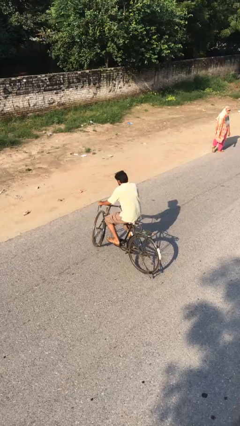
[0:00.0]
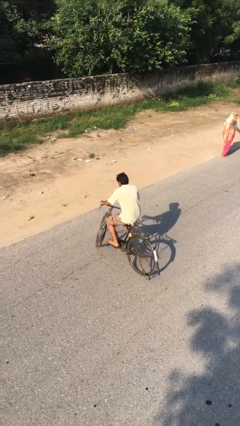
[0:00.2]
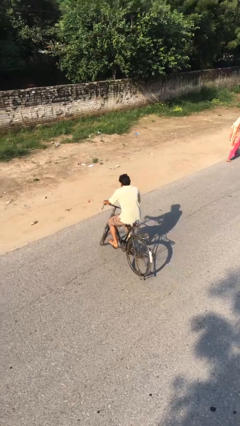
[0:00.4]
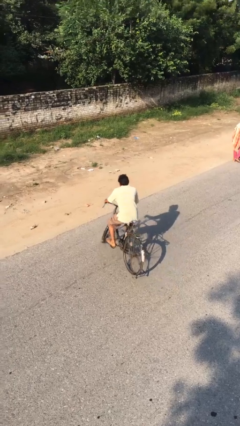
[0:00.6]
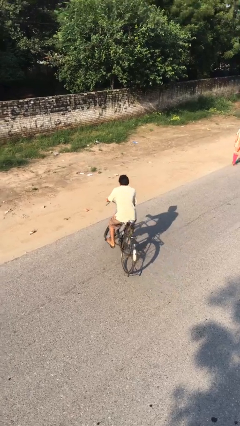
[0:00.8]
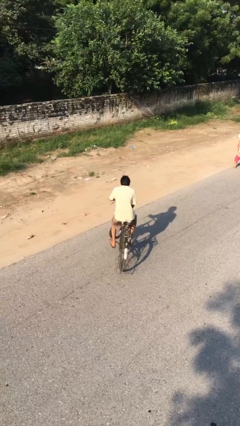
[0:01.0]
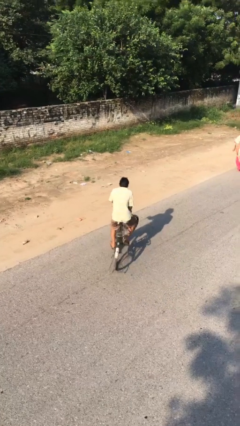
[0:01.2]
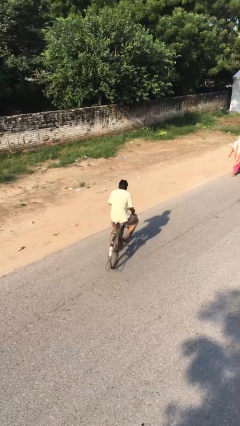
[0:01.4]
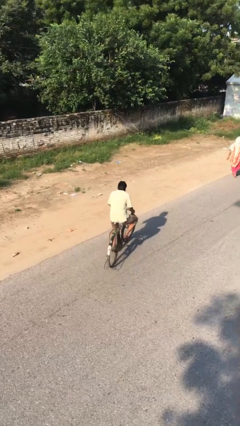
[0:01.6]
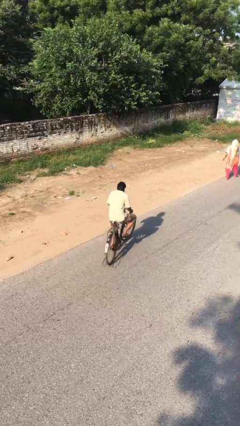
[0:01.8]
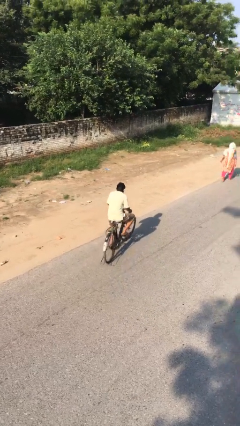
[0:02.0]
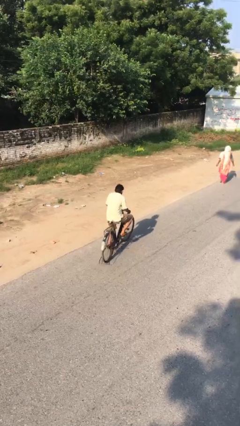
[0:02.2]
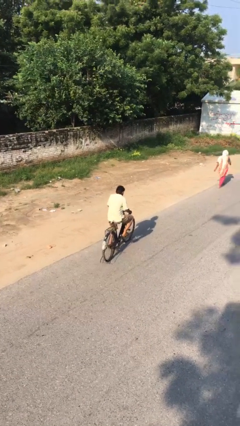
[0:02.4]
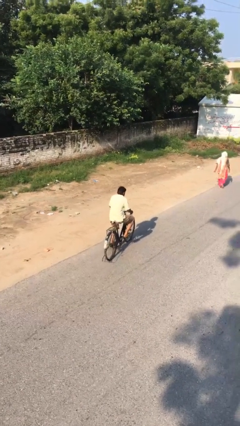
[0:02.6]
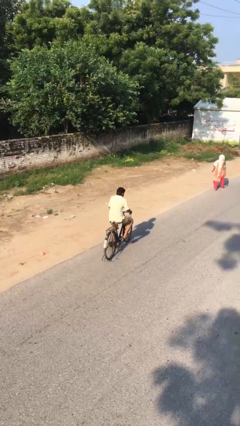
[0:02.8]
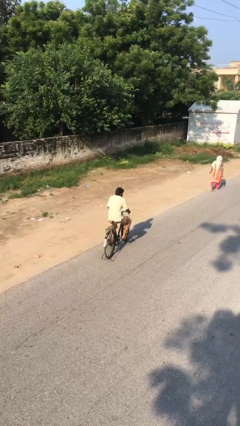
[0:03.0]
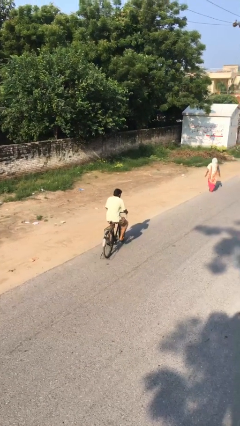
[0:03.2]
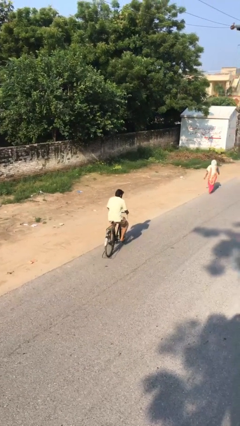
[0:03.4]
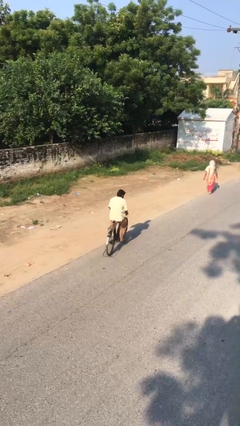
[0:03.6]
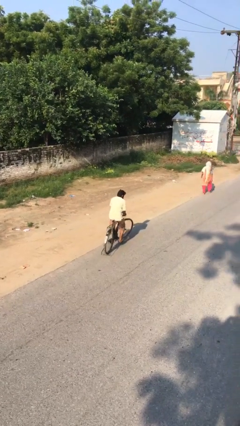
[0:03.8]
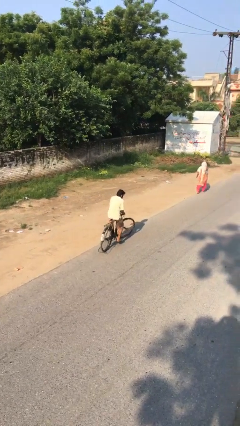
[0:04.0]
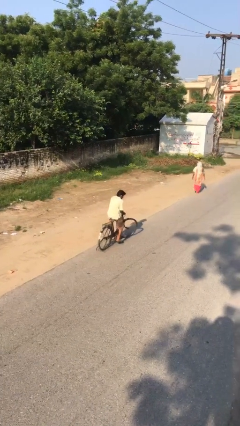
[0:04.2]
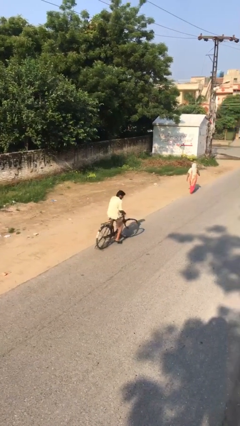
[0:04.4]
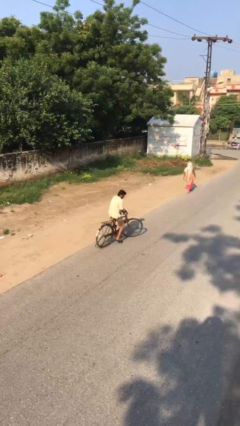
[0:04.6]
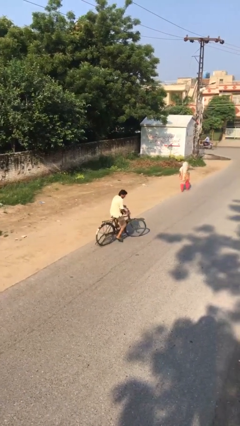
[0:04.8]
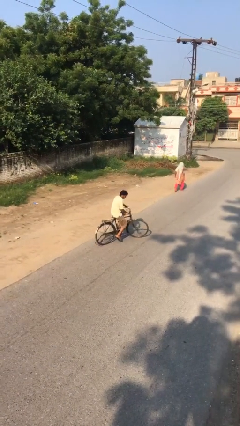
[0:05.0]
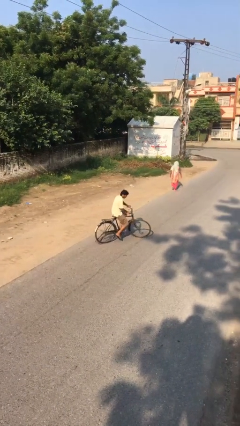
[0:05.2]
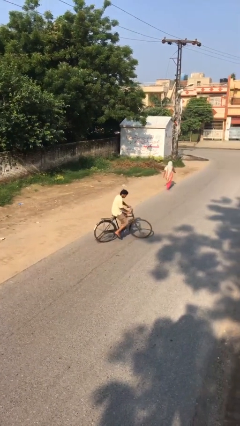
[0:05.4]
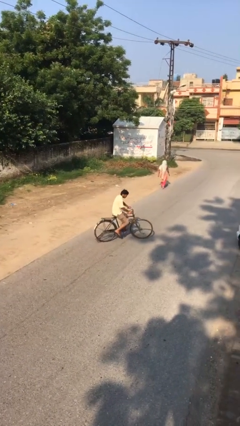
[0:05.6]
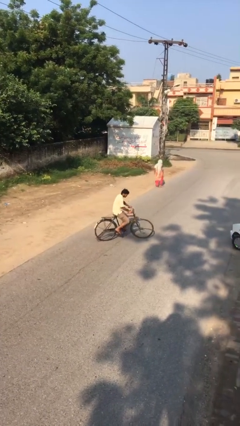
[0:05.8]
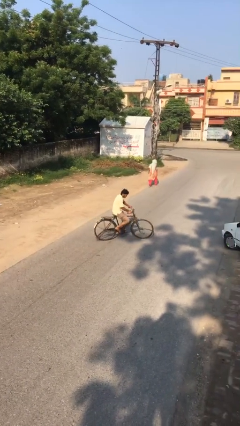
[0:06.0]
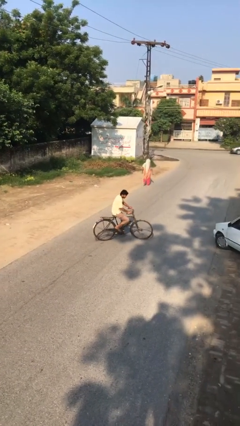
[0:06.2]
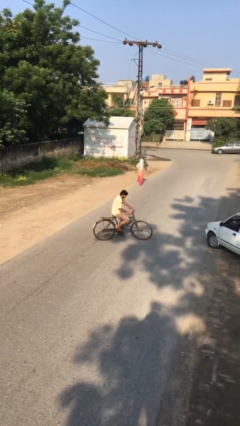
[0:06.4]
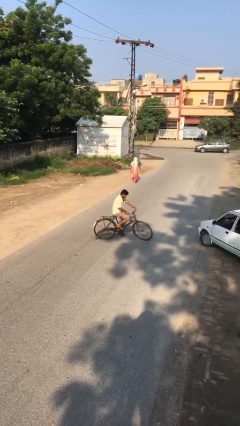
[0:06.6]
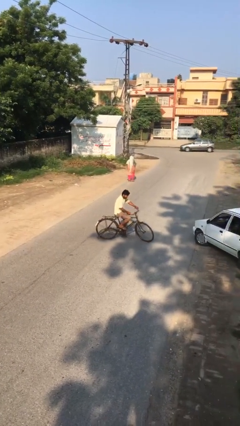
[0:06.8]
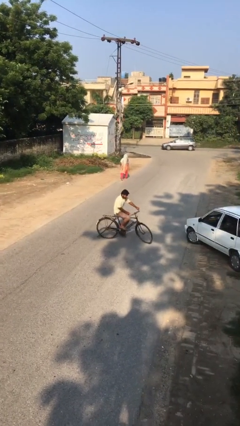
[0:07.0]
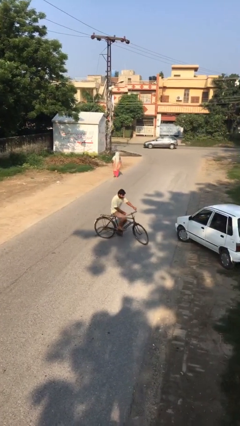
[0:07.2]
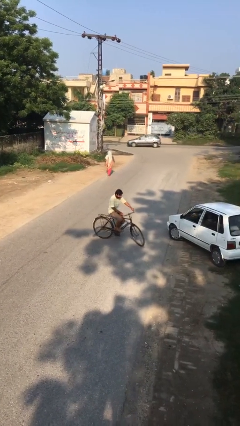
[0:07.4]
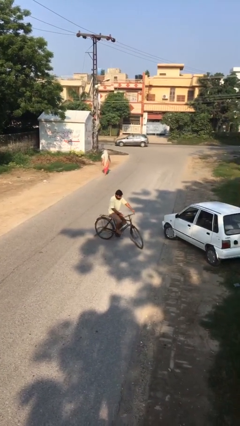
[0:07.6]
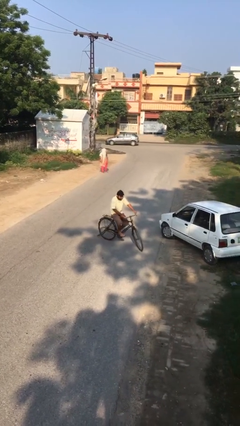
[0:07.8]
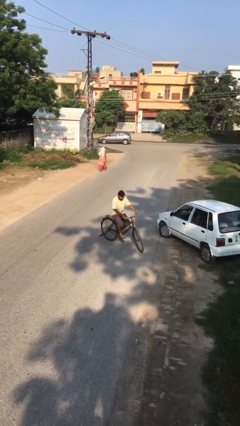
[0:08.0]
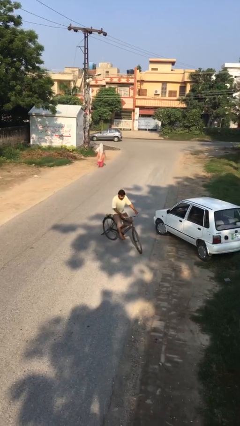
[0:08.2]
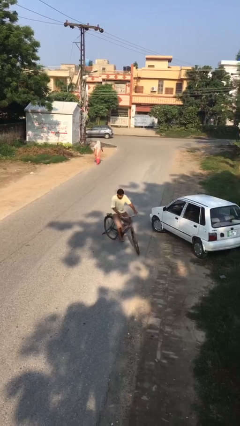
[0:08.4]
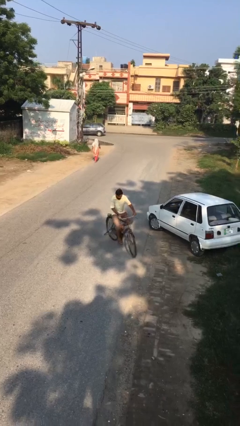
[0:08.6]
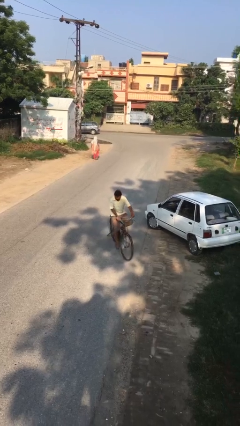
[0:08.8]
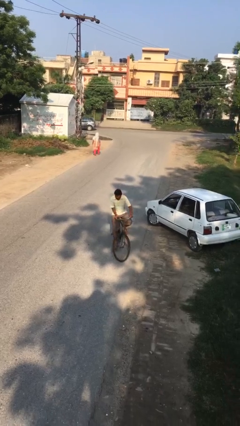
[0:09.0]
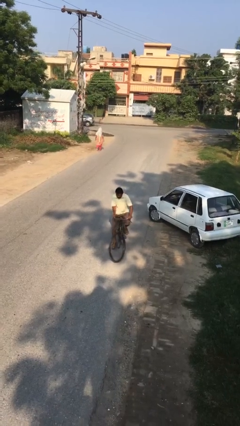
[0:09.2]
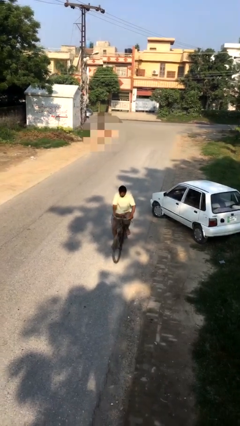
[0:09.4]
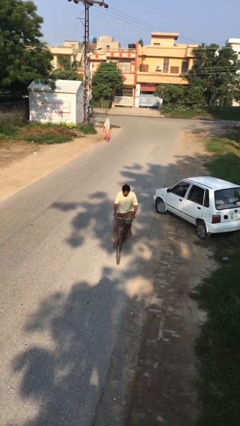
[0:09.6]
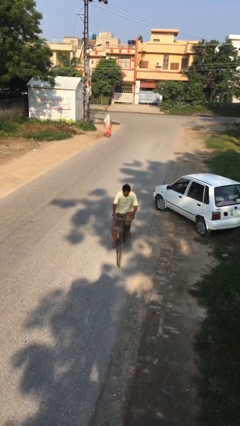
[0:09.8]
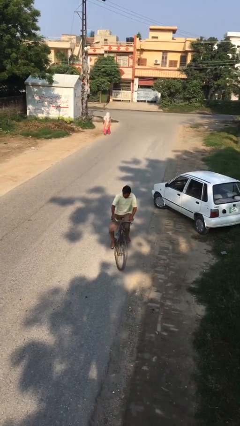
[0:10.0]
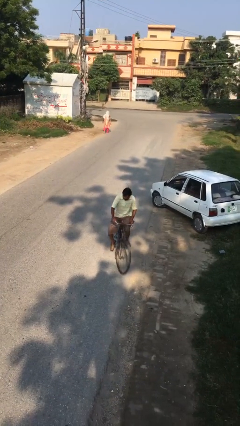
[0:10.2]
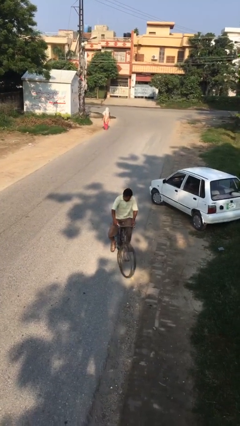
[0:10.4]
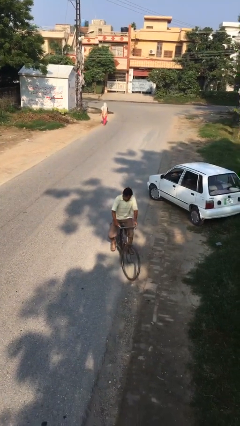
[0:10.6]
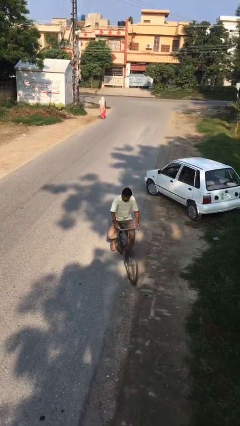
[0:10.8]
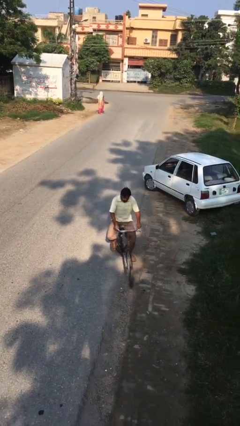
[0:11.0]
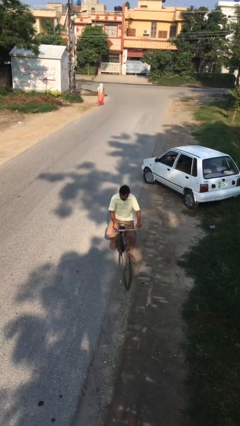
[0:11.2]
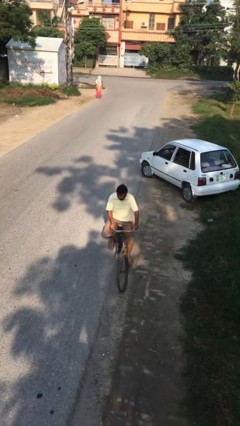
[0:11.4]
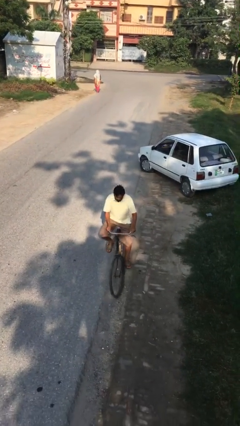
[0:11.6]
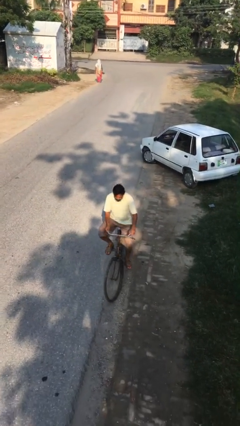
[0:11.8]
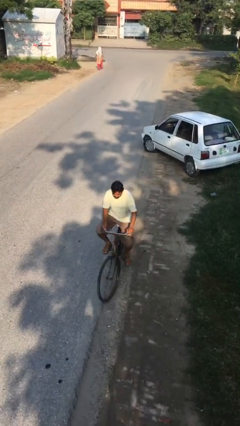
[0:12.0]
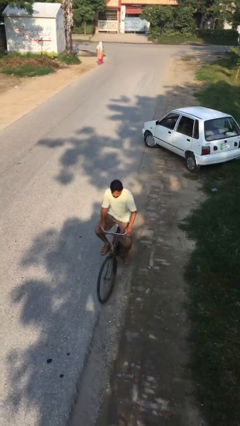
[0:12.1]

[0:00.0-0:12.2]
person rides bicycle

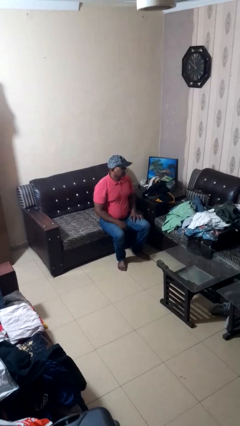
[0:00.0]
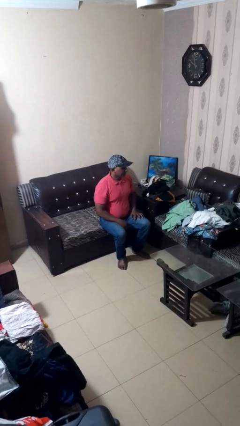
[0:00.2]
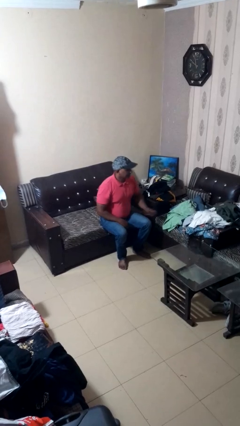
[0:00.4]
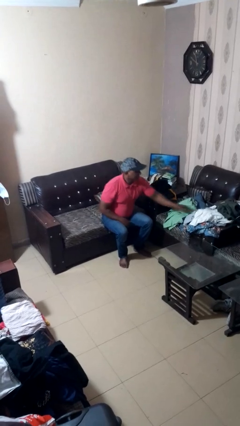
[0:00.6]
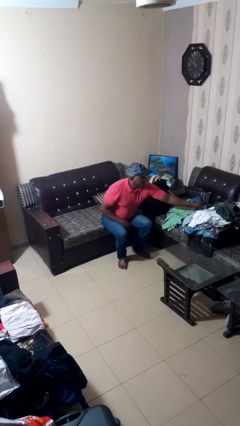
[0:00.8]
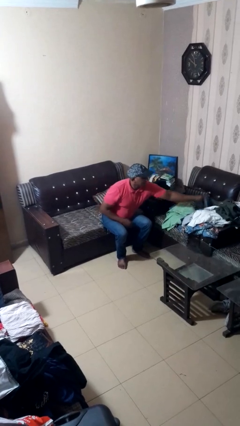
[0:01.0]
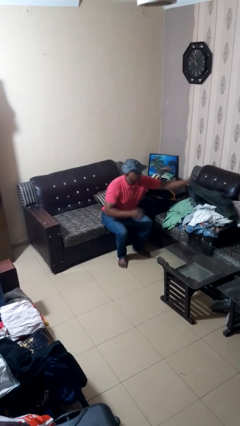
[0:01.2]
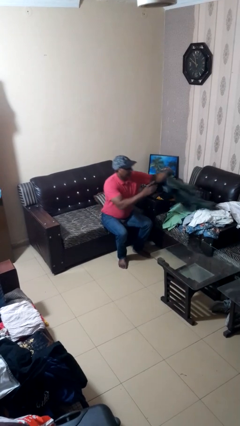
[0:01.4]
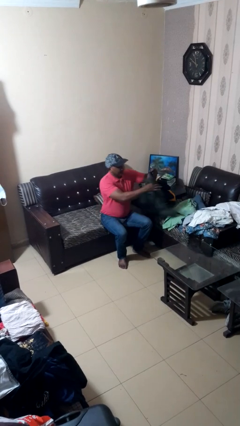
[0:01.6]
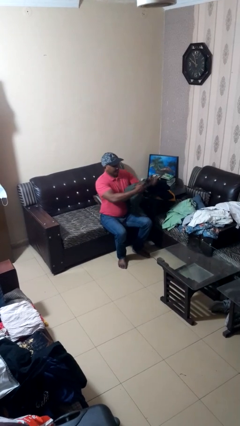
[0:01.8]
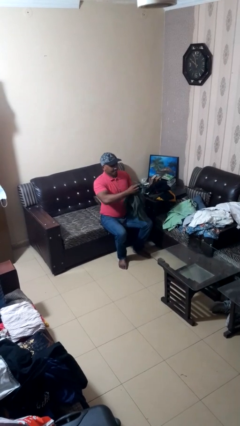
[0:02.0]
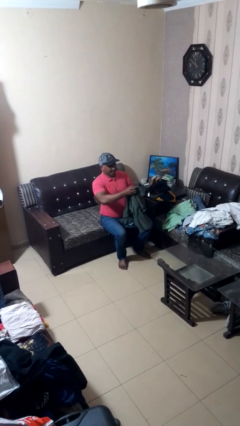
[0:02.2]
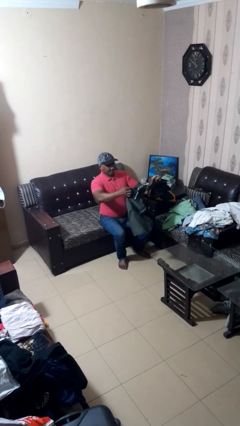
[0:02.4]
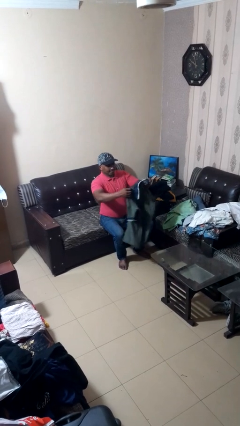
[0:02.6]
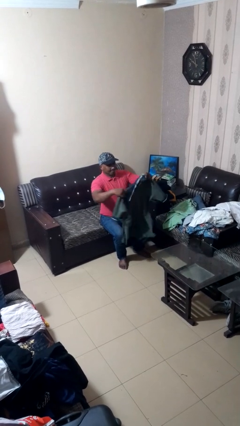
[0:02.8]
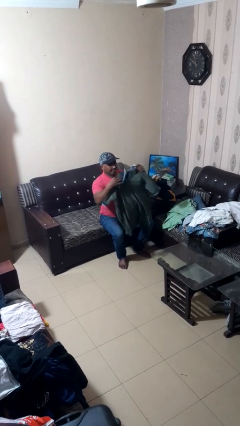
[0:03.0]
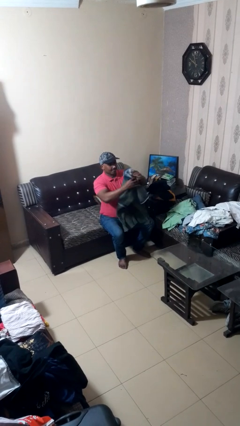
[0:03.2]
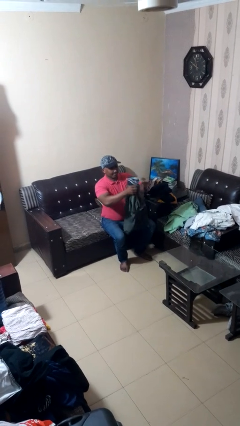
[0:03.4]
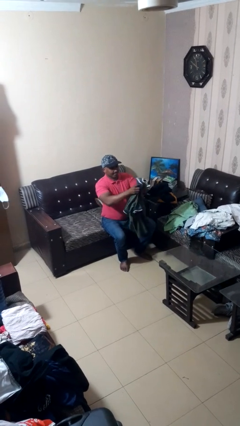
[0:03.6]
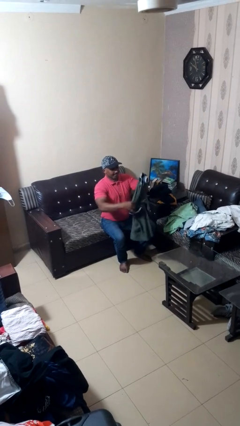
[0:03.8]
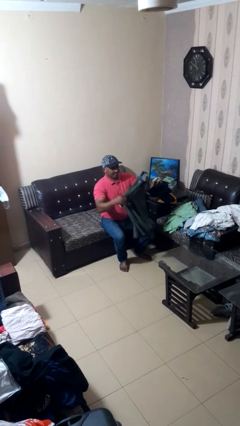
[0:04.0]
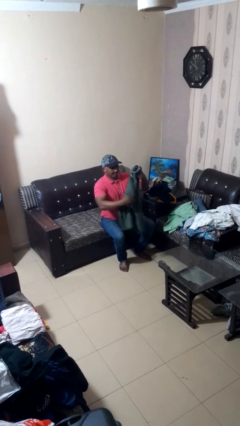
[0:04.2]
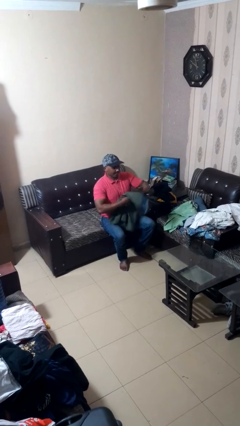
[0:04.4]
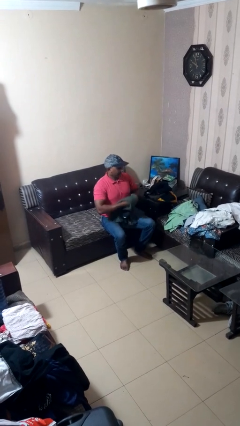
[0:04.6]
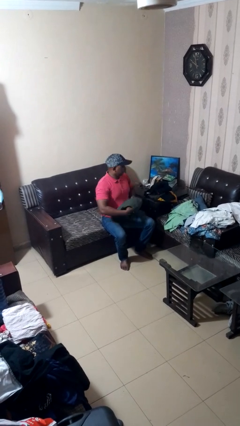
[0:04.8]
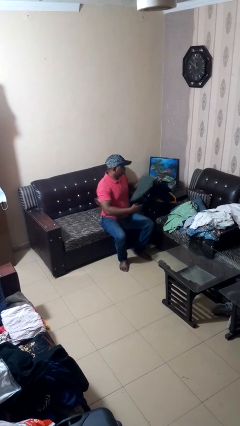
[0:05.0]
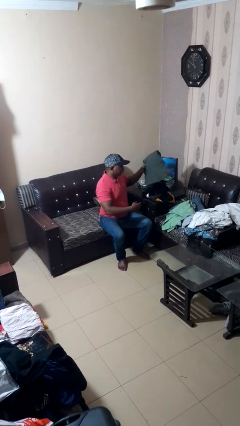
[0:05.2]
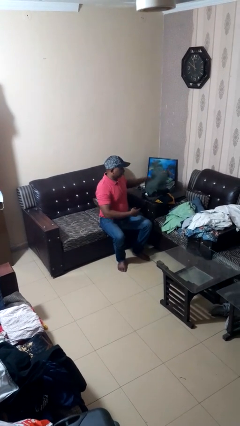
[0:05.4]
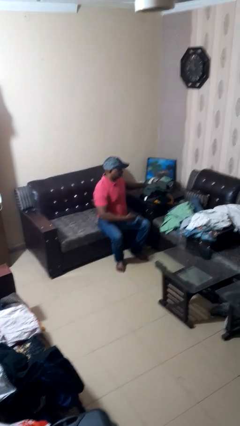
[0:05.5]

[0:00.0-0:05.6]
person folds shirt

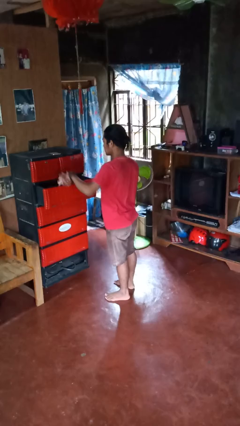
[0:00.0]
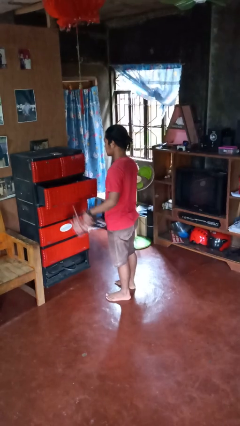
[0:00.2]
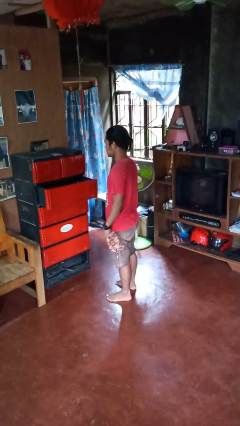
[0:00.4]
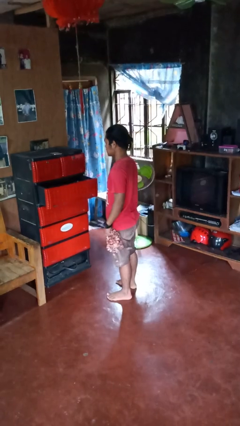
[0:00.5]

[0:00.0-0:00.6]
person takes clothes from dresser
